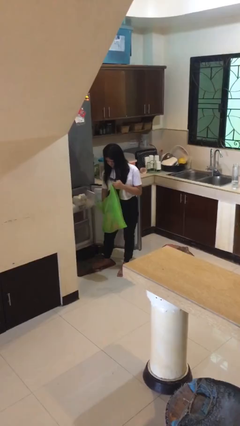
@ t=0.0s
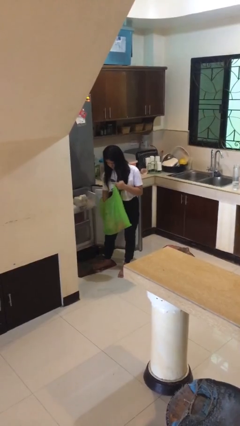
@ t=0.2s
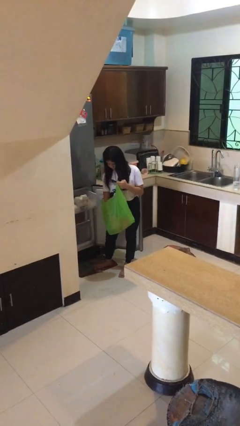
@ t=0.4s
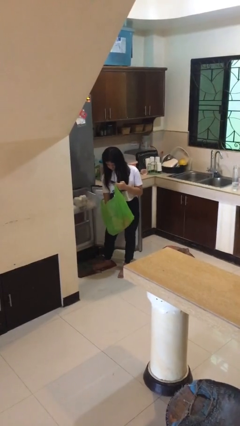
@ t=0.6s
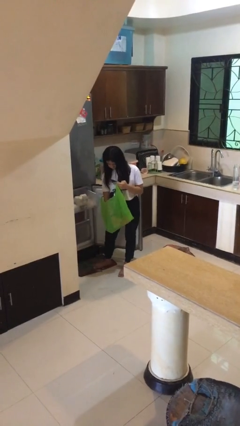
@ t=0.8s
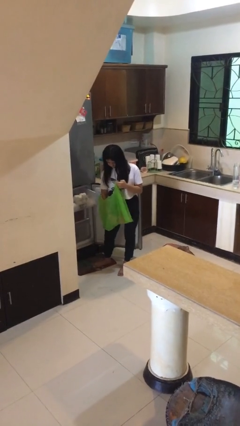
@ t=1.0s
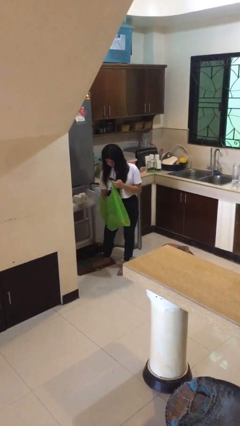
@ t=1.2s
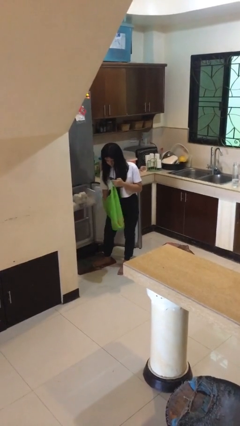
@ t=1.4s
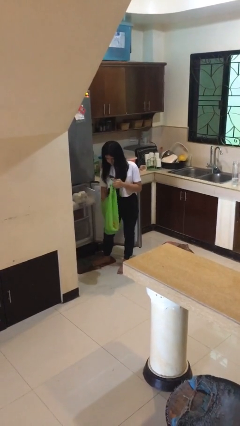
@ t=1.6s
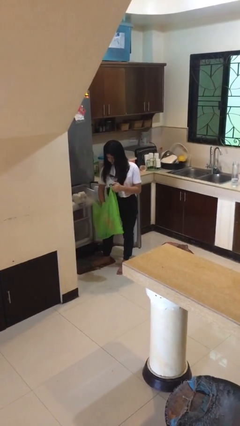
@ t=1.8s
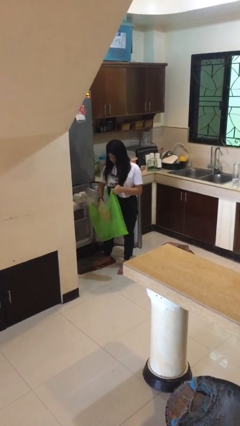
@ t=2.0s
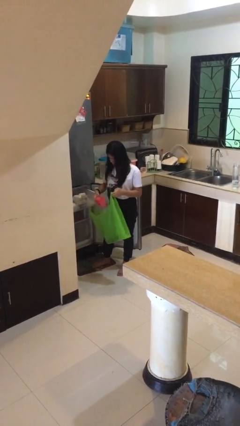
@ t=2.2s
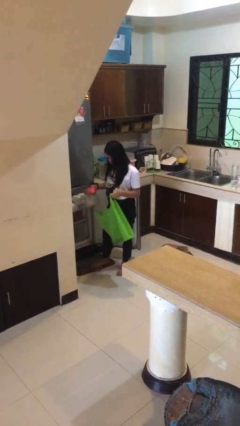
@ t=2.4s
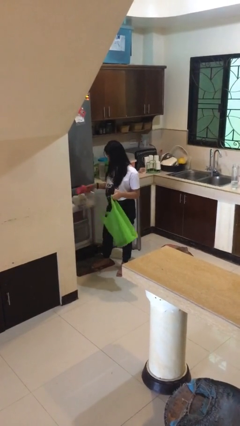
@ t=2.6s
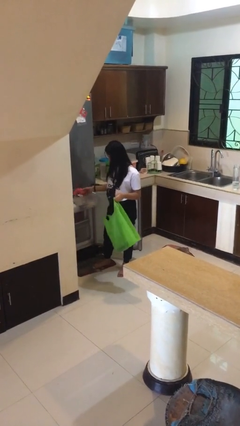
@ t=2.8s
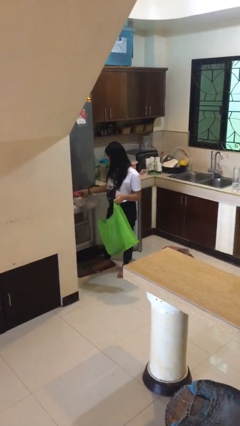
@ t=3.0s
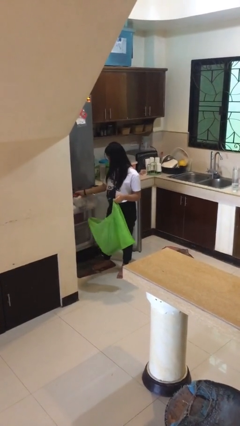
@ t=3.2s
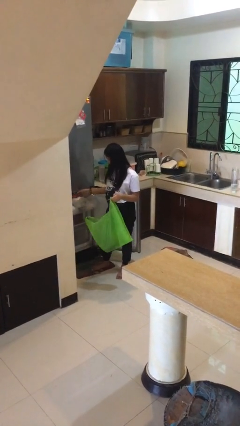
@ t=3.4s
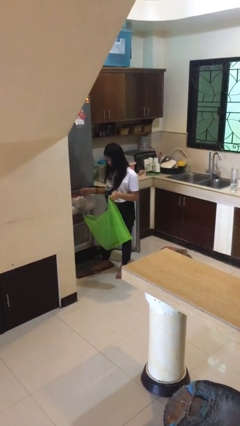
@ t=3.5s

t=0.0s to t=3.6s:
person loads groceries into refrigerator

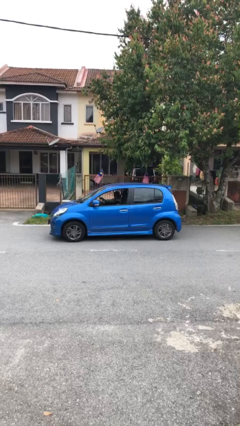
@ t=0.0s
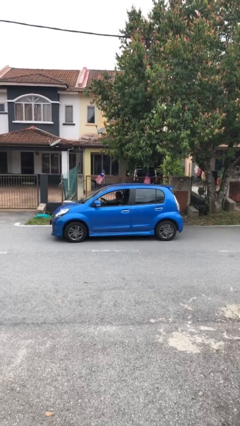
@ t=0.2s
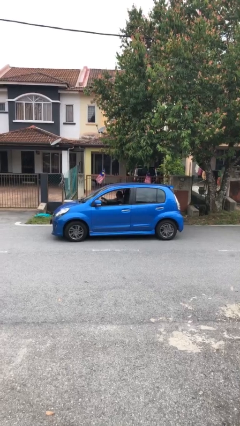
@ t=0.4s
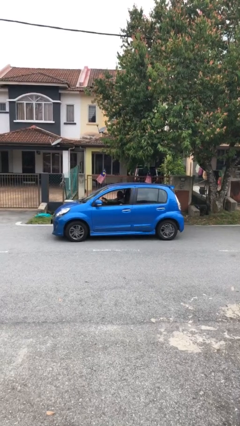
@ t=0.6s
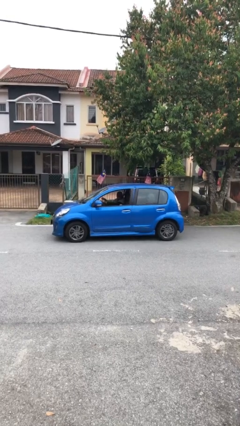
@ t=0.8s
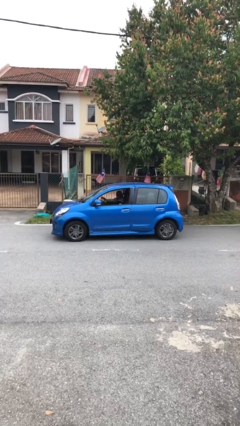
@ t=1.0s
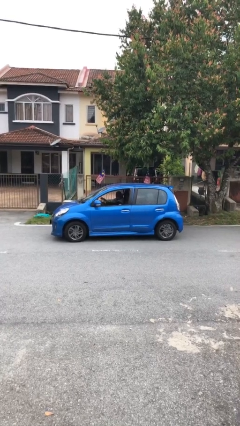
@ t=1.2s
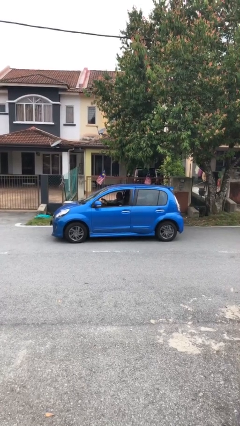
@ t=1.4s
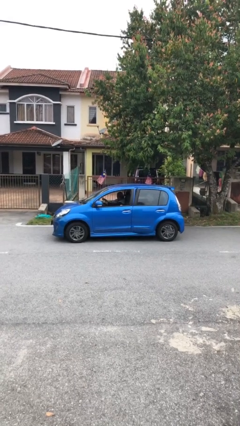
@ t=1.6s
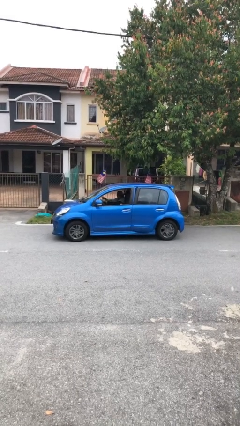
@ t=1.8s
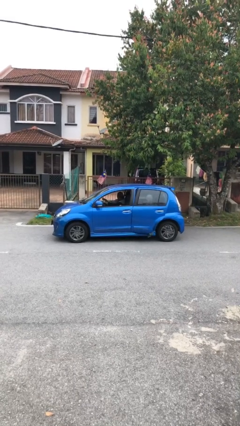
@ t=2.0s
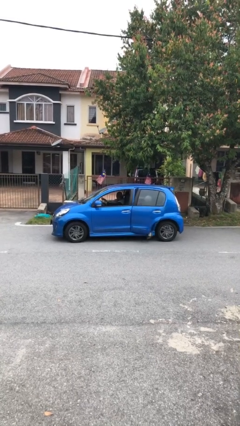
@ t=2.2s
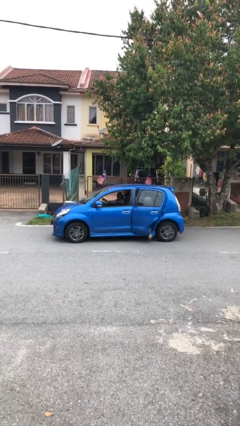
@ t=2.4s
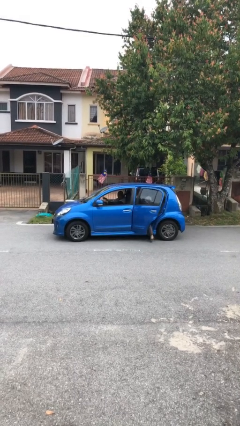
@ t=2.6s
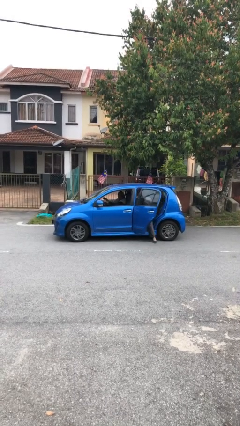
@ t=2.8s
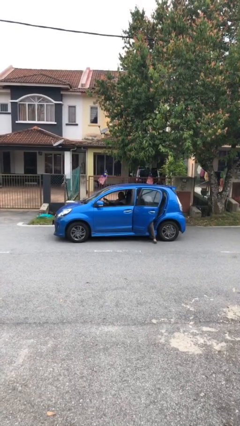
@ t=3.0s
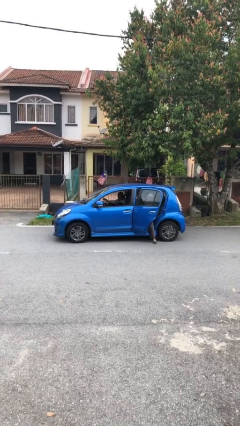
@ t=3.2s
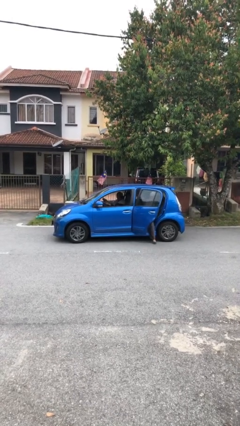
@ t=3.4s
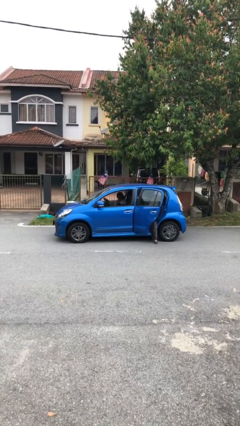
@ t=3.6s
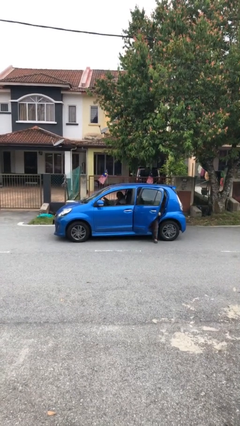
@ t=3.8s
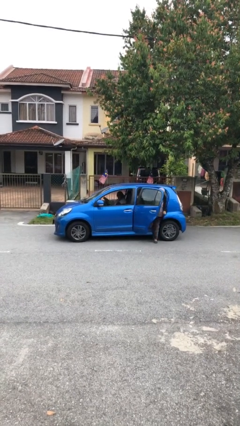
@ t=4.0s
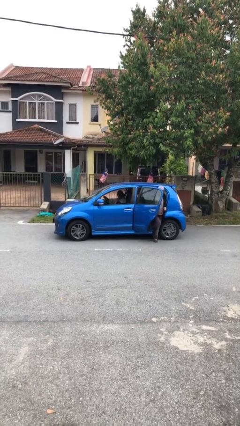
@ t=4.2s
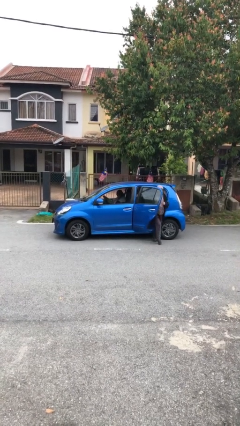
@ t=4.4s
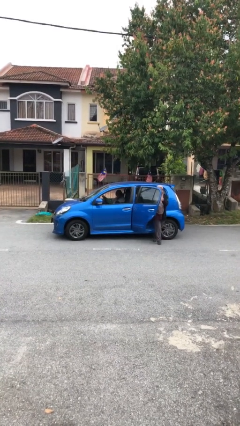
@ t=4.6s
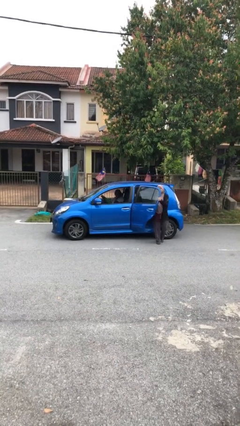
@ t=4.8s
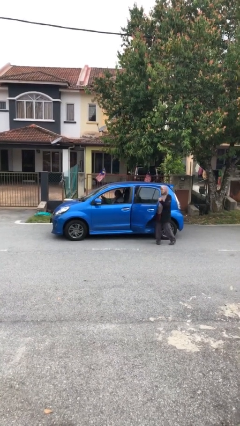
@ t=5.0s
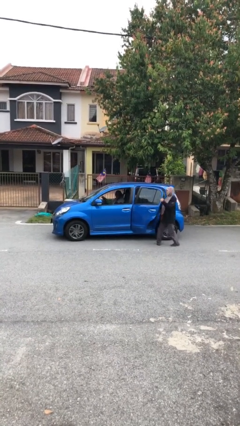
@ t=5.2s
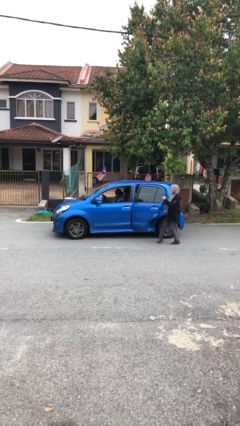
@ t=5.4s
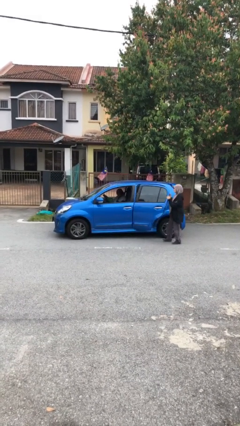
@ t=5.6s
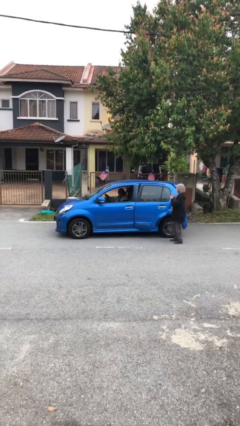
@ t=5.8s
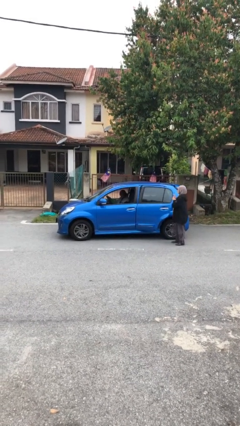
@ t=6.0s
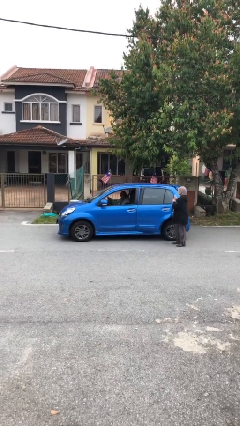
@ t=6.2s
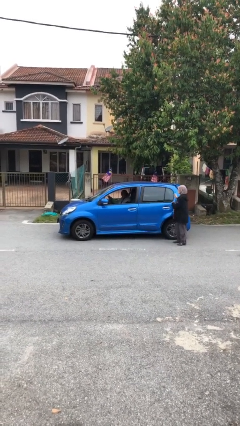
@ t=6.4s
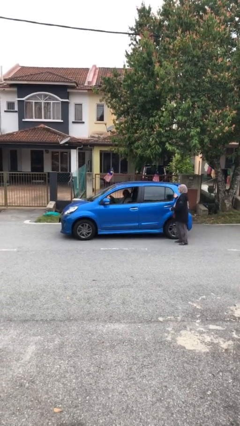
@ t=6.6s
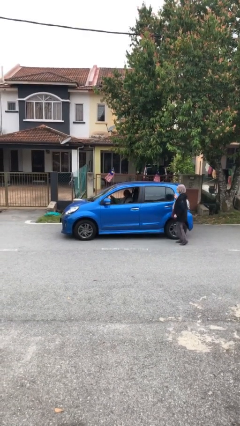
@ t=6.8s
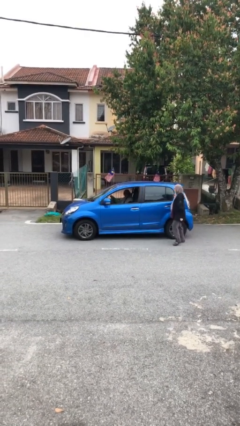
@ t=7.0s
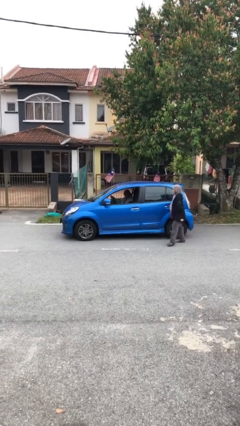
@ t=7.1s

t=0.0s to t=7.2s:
car drops off person
